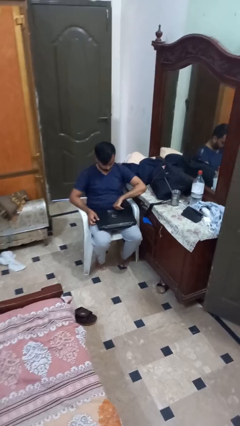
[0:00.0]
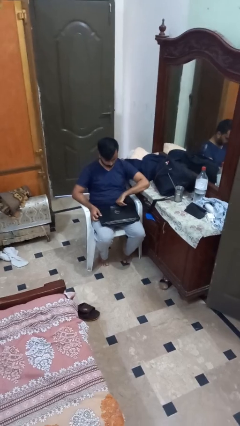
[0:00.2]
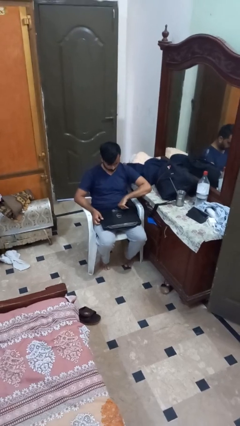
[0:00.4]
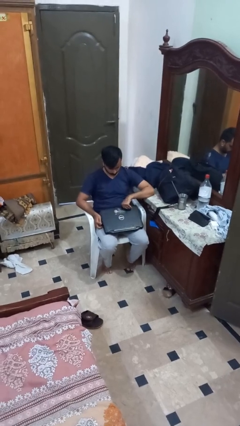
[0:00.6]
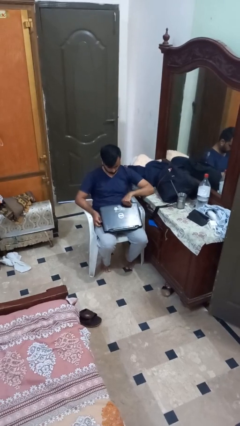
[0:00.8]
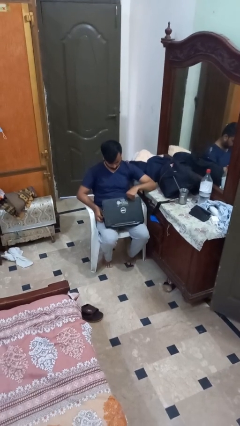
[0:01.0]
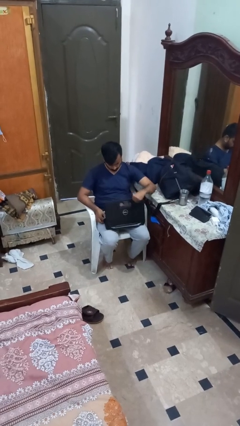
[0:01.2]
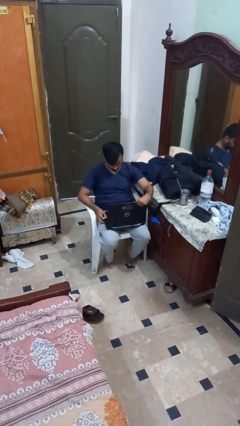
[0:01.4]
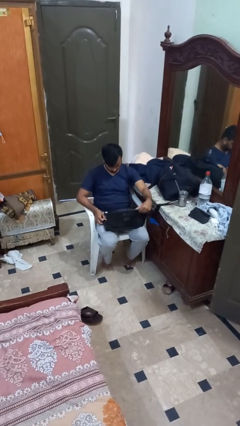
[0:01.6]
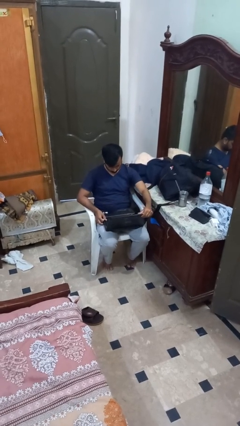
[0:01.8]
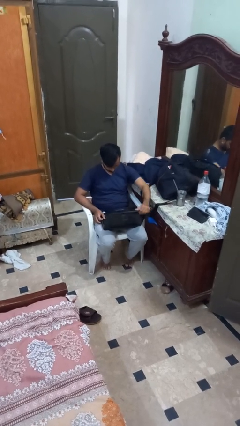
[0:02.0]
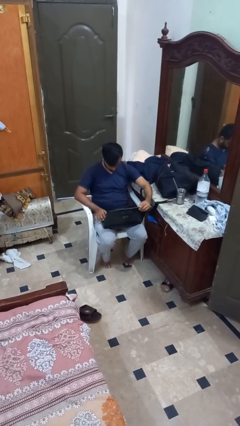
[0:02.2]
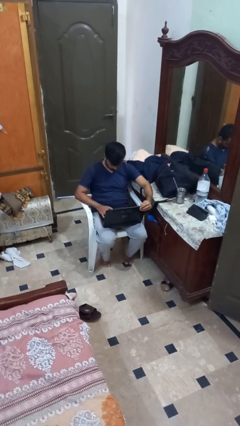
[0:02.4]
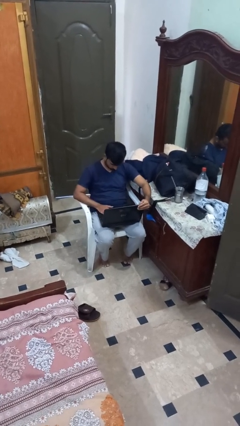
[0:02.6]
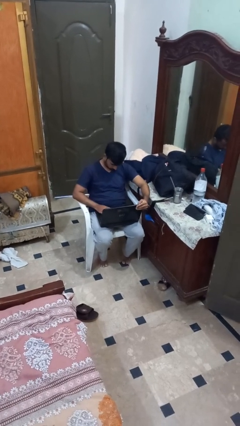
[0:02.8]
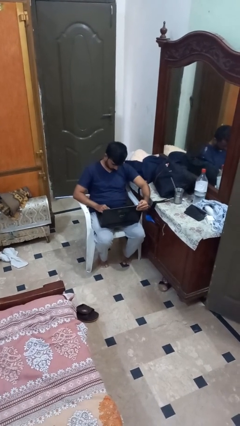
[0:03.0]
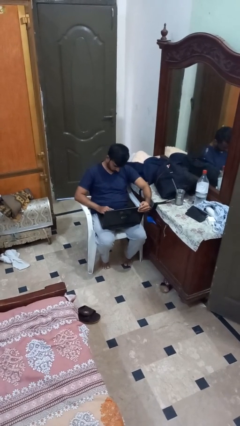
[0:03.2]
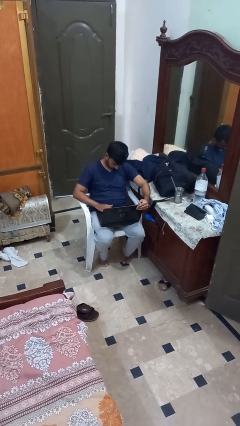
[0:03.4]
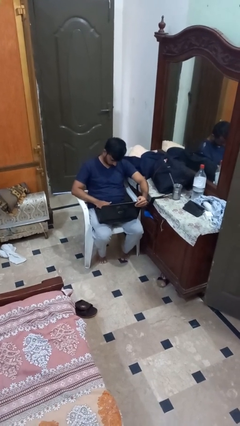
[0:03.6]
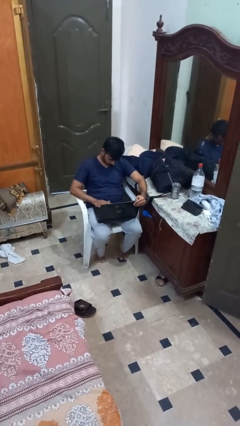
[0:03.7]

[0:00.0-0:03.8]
person opens laptop

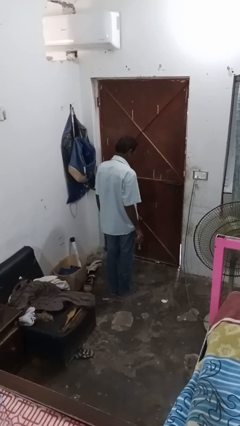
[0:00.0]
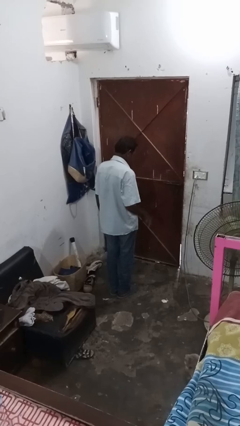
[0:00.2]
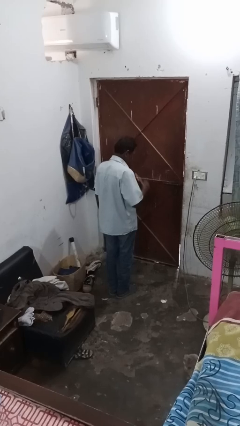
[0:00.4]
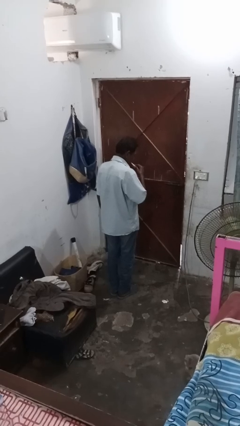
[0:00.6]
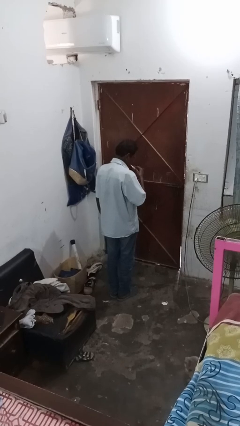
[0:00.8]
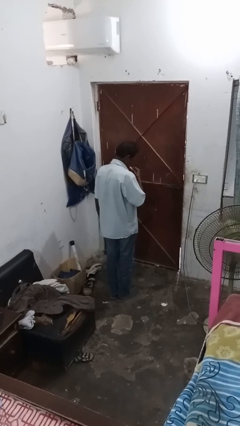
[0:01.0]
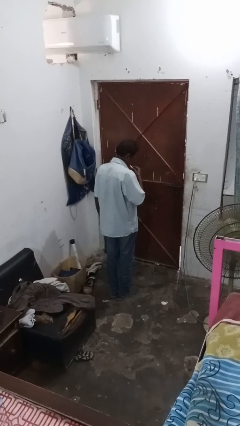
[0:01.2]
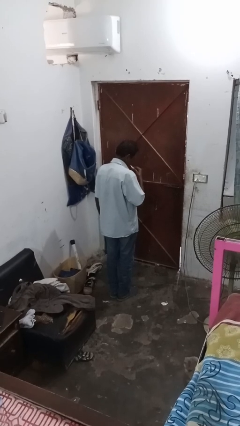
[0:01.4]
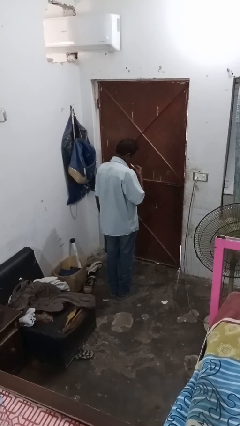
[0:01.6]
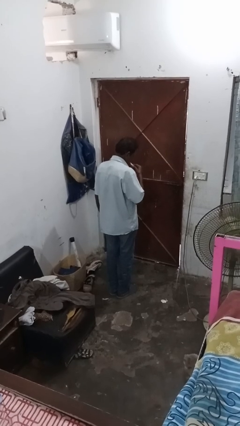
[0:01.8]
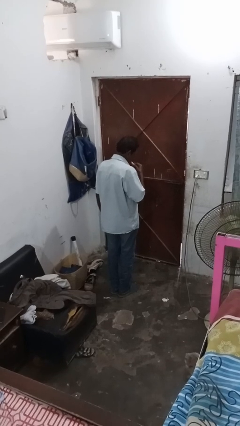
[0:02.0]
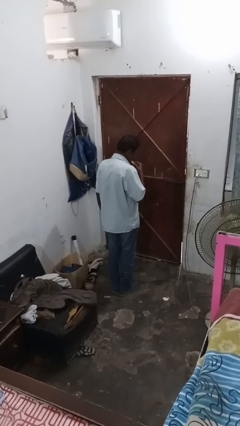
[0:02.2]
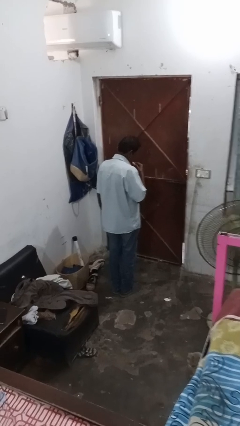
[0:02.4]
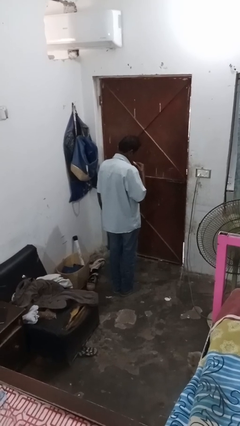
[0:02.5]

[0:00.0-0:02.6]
person brushes teeth

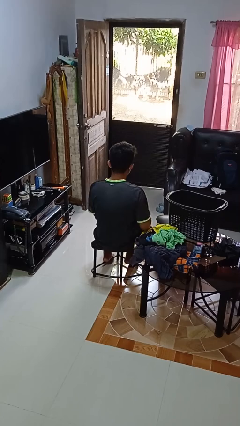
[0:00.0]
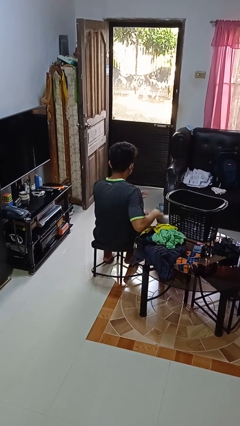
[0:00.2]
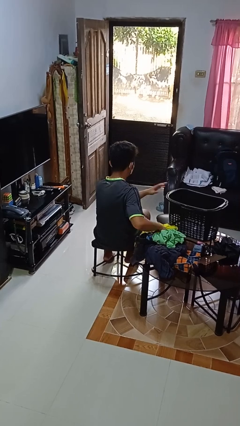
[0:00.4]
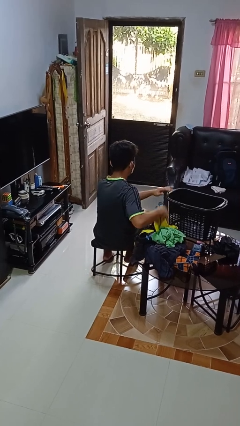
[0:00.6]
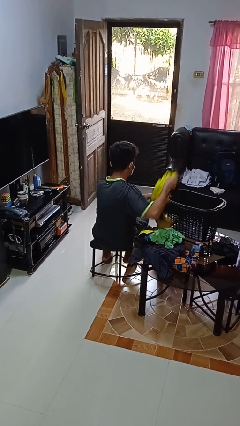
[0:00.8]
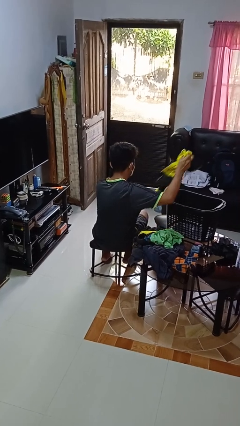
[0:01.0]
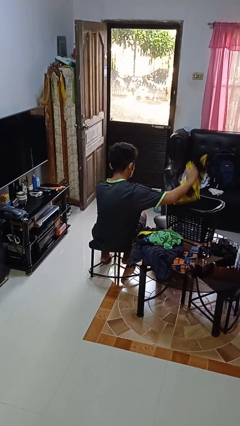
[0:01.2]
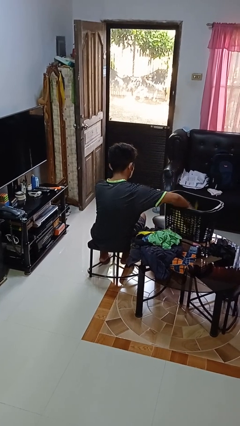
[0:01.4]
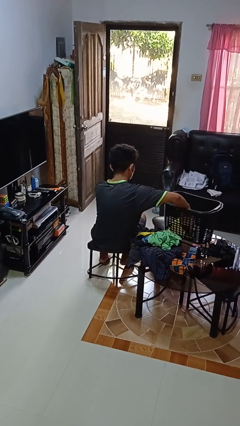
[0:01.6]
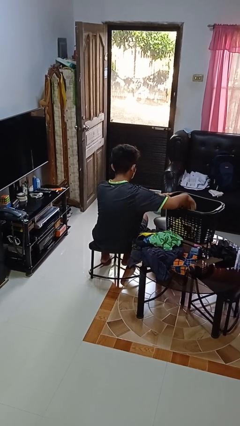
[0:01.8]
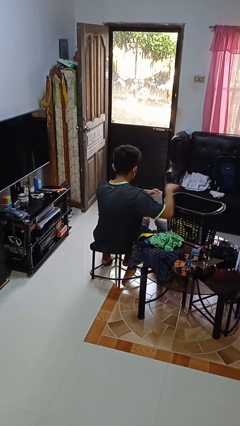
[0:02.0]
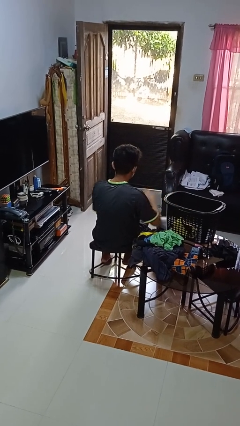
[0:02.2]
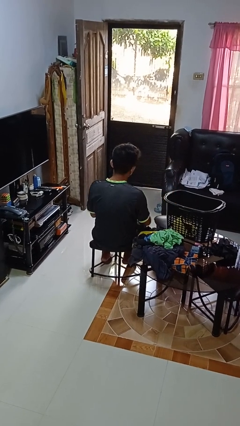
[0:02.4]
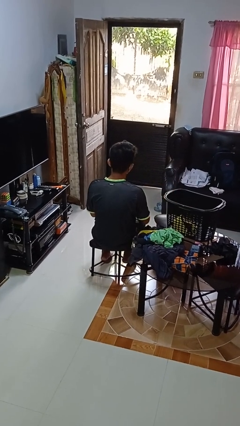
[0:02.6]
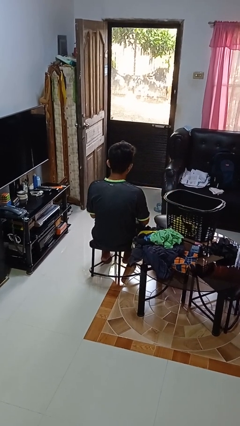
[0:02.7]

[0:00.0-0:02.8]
person puts object into basket

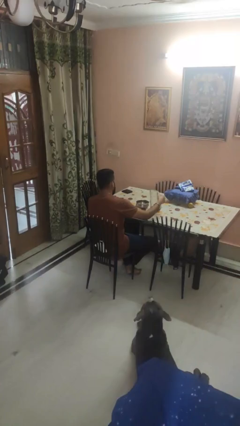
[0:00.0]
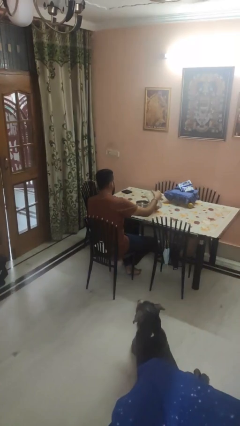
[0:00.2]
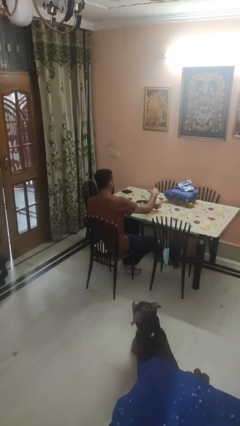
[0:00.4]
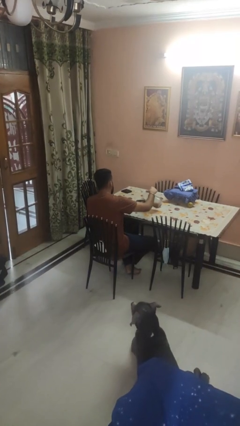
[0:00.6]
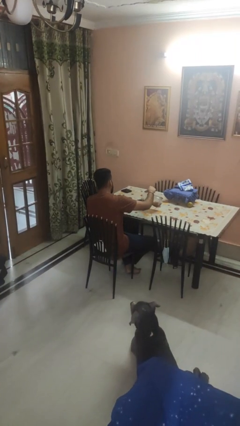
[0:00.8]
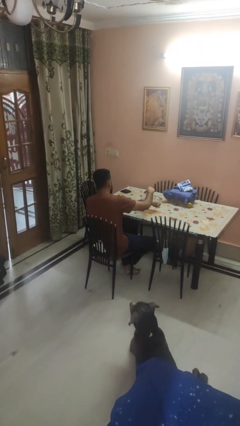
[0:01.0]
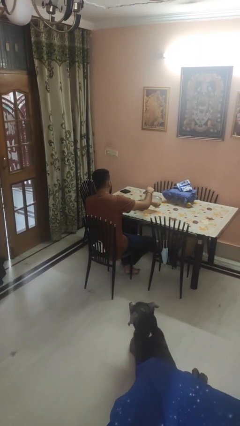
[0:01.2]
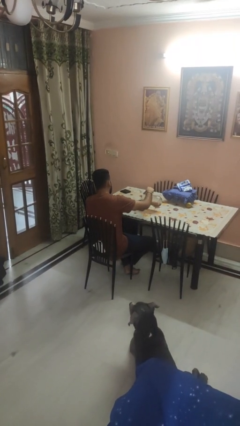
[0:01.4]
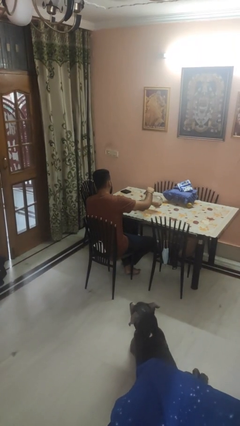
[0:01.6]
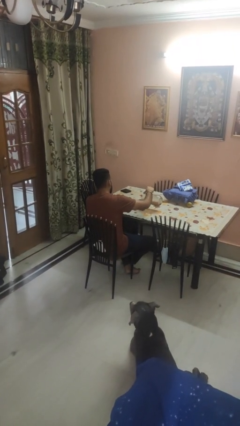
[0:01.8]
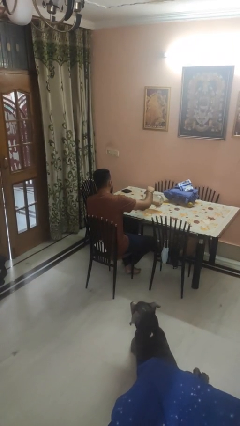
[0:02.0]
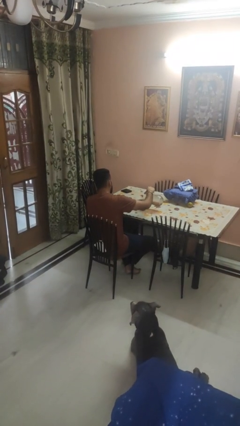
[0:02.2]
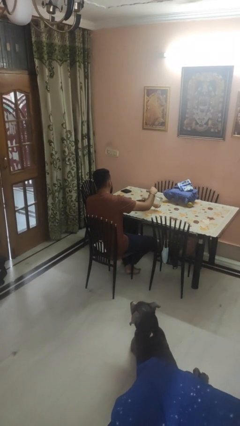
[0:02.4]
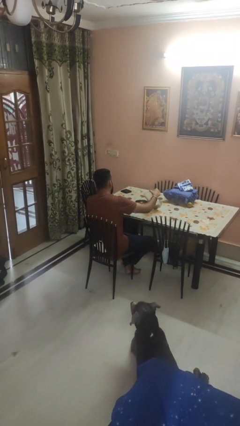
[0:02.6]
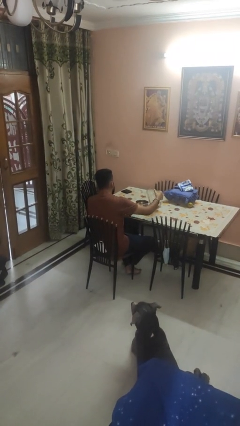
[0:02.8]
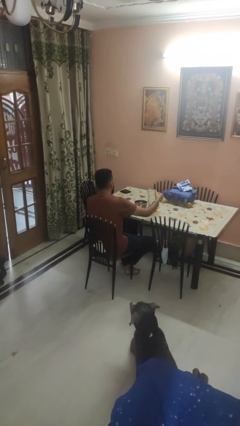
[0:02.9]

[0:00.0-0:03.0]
person pours into bowl

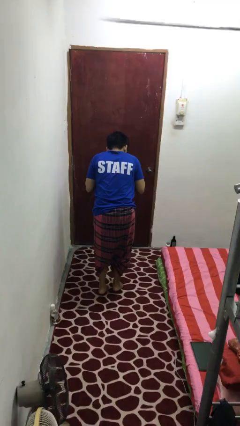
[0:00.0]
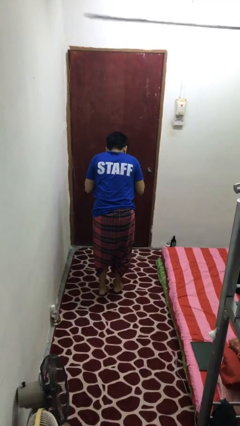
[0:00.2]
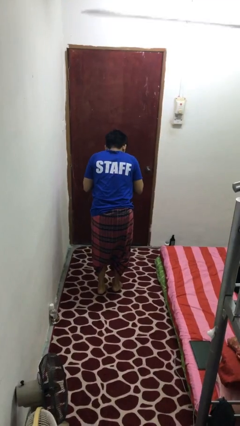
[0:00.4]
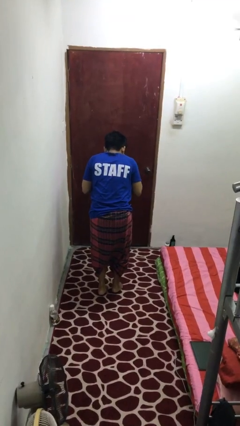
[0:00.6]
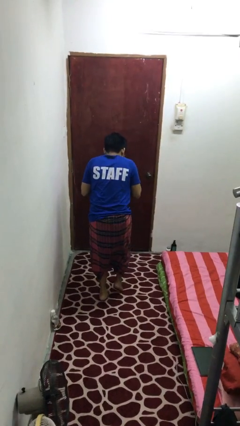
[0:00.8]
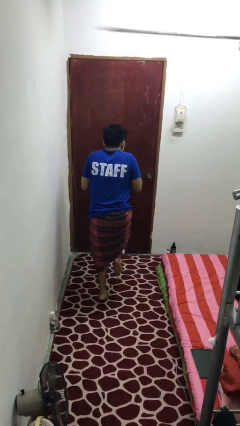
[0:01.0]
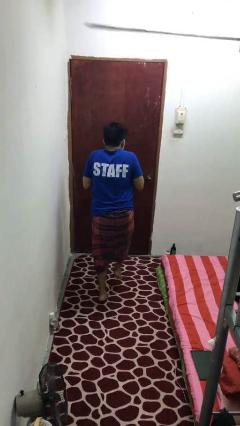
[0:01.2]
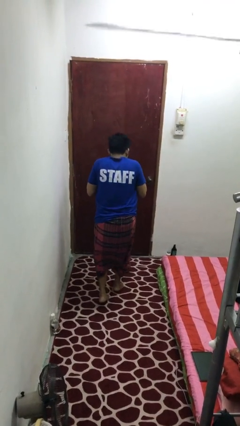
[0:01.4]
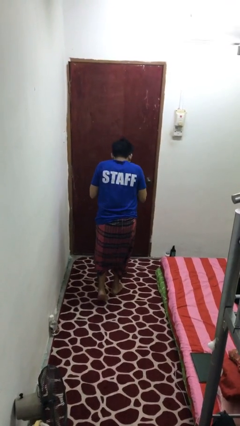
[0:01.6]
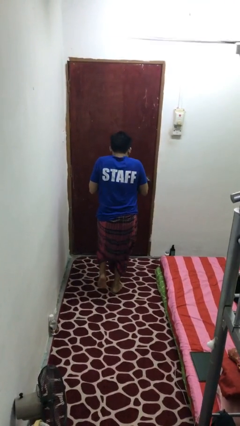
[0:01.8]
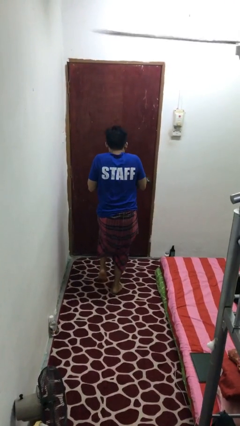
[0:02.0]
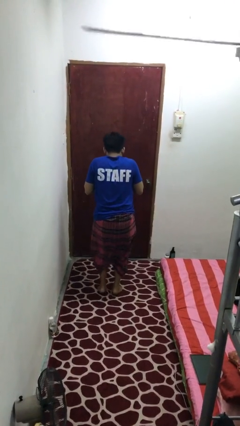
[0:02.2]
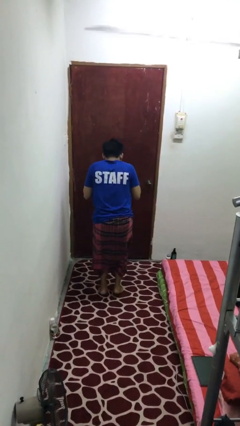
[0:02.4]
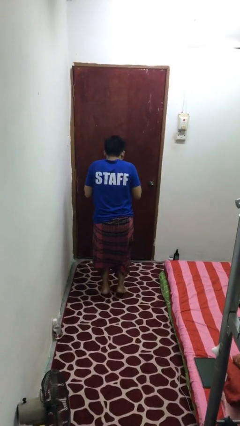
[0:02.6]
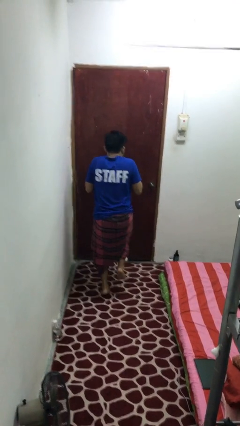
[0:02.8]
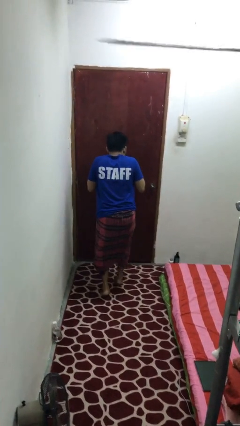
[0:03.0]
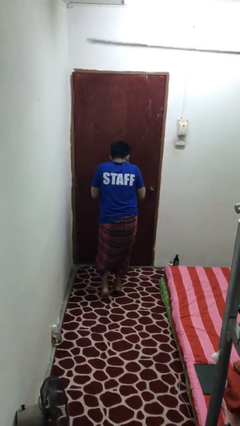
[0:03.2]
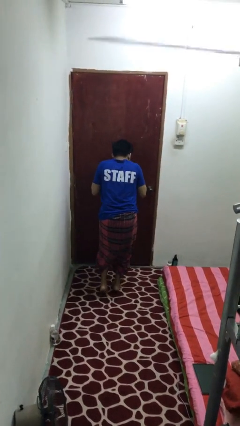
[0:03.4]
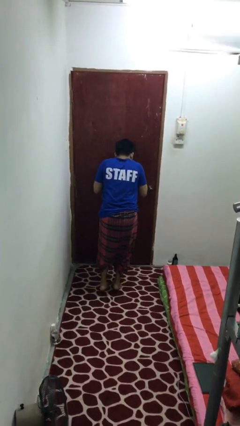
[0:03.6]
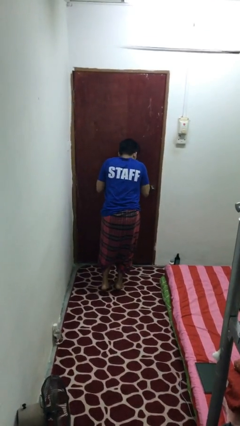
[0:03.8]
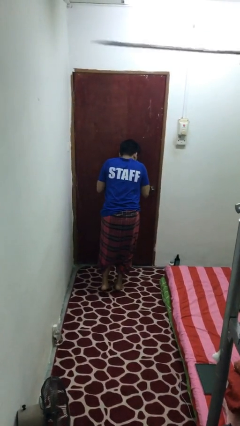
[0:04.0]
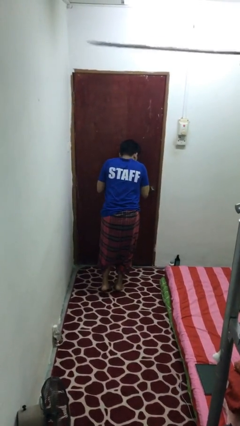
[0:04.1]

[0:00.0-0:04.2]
person walks tiptoe

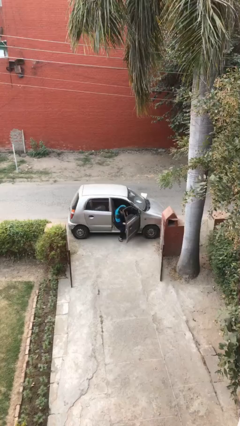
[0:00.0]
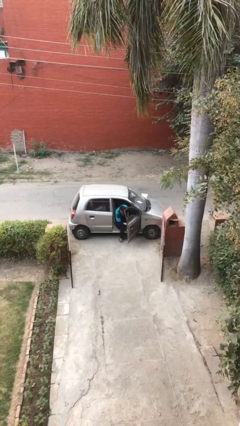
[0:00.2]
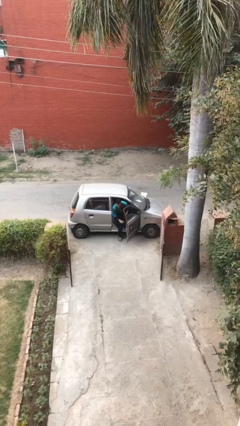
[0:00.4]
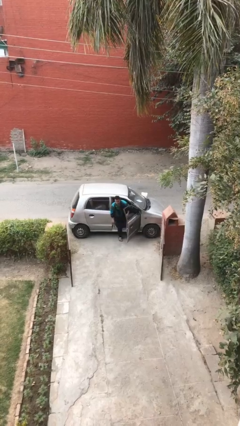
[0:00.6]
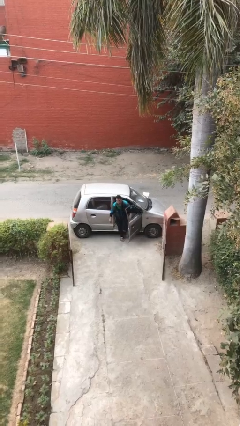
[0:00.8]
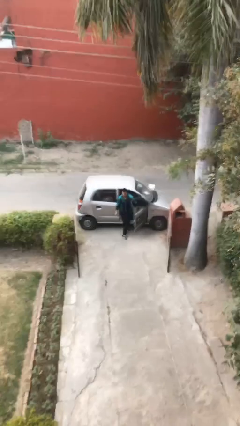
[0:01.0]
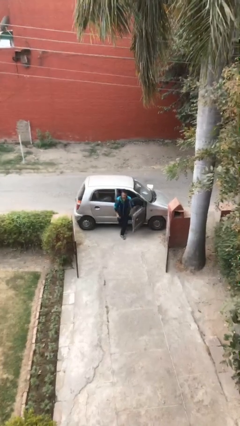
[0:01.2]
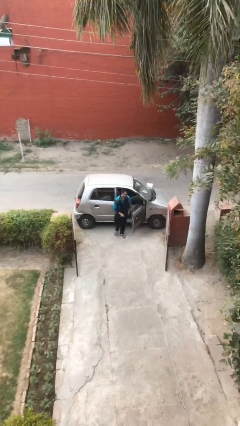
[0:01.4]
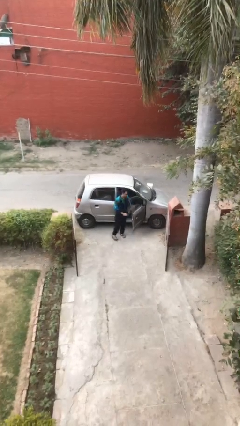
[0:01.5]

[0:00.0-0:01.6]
person exits car
